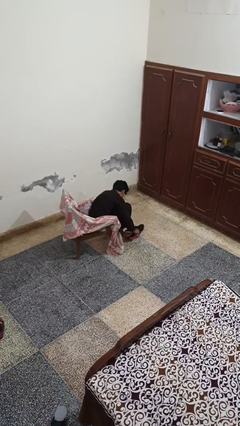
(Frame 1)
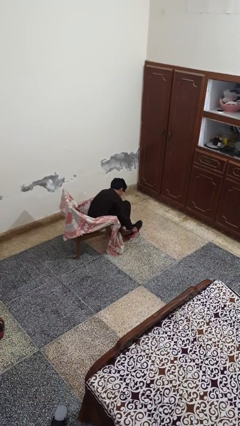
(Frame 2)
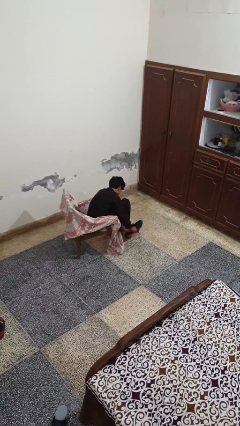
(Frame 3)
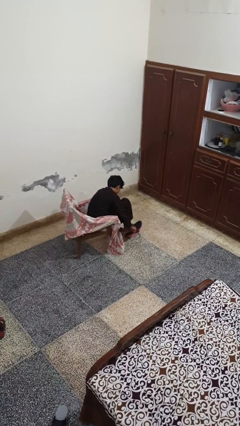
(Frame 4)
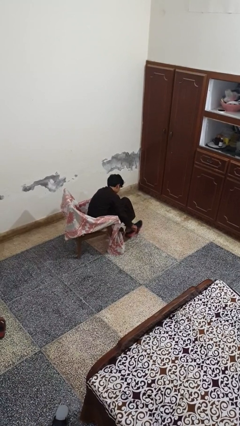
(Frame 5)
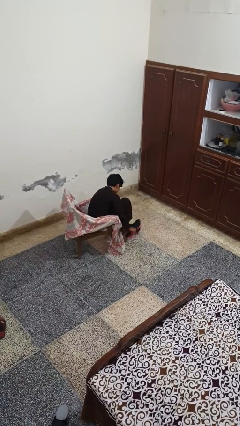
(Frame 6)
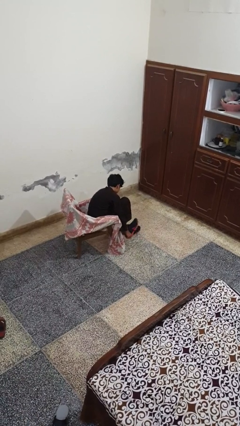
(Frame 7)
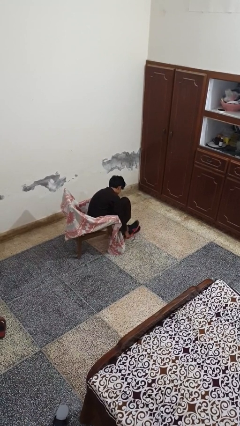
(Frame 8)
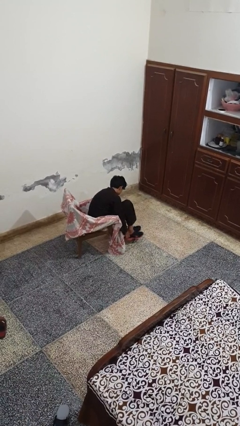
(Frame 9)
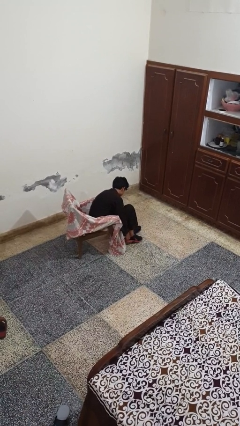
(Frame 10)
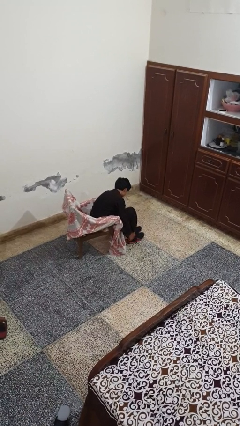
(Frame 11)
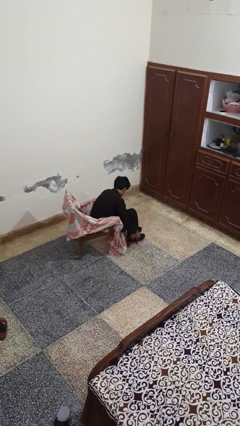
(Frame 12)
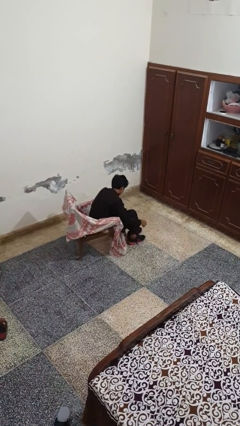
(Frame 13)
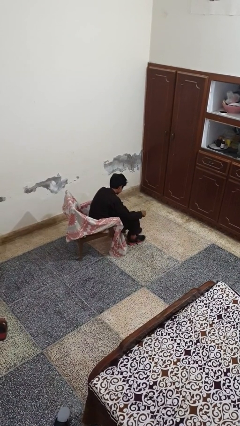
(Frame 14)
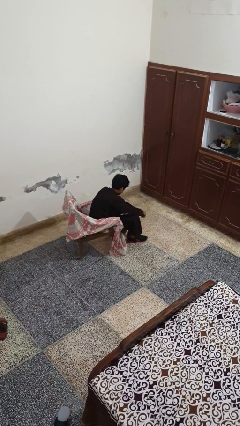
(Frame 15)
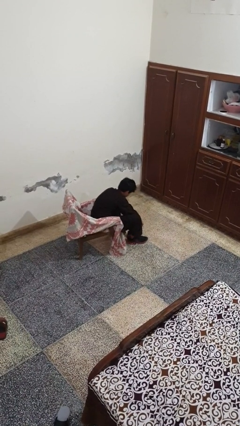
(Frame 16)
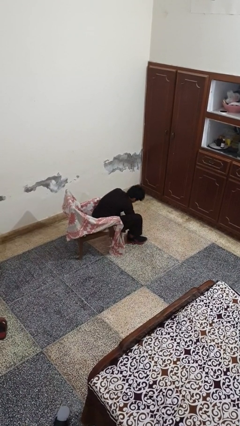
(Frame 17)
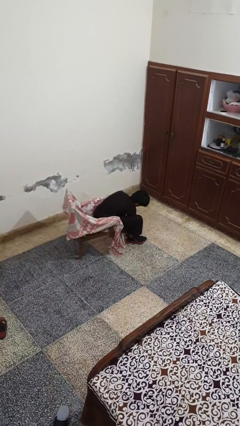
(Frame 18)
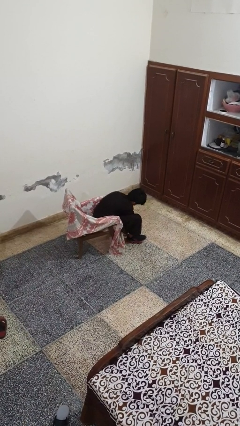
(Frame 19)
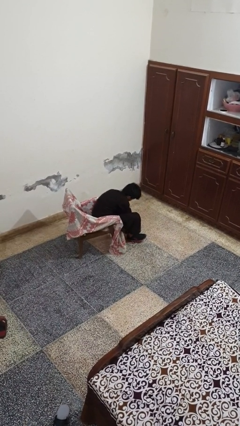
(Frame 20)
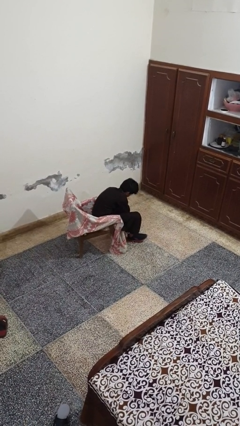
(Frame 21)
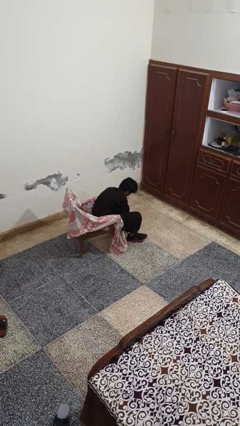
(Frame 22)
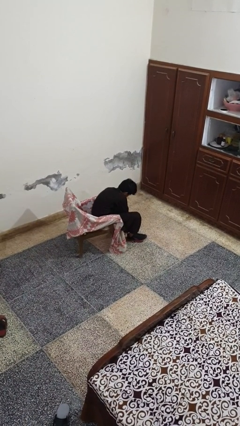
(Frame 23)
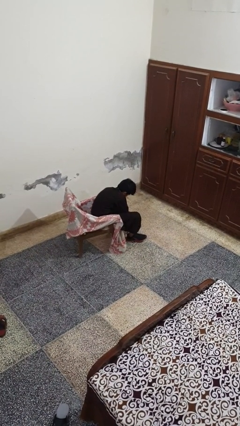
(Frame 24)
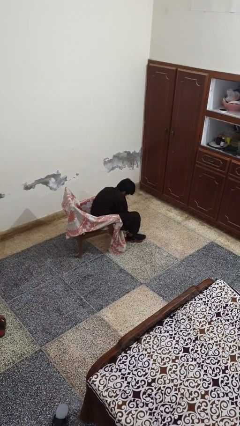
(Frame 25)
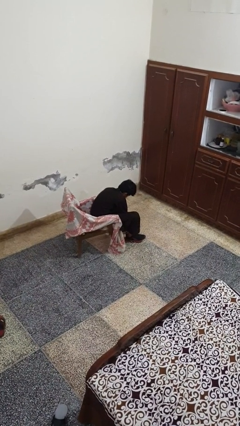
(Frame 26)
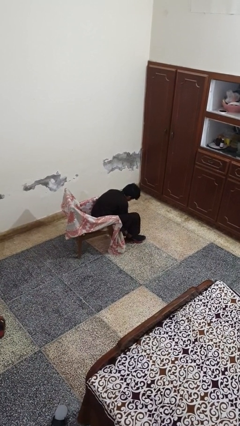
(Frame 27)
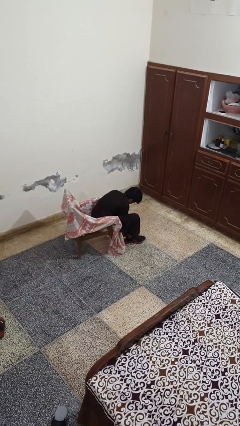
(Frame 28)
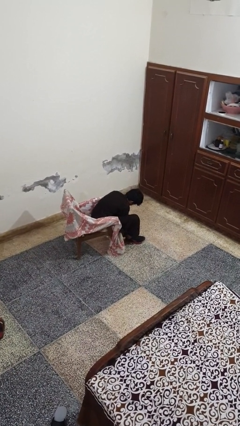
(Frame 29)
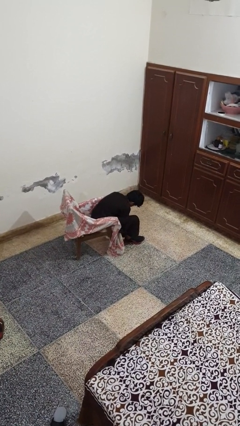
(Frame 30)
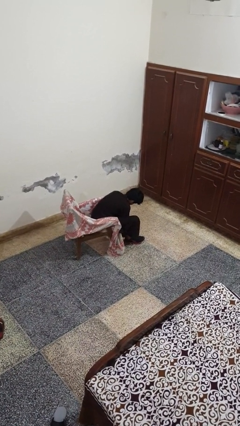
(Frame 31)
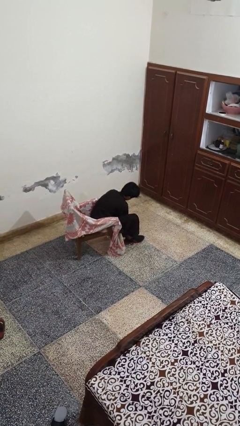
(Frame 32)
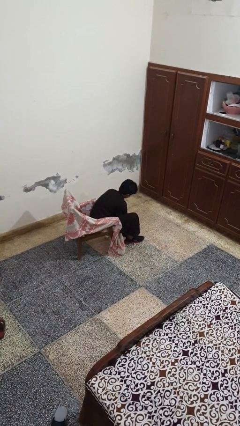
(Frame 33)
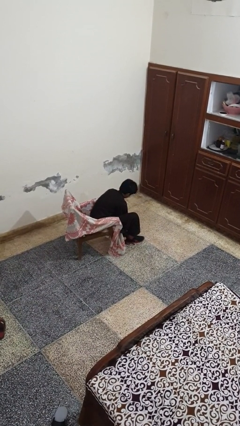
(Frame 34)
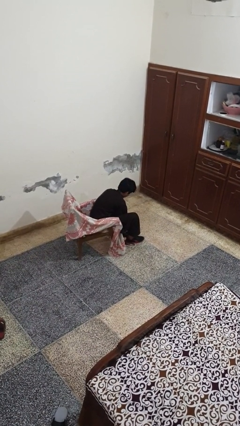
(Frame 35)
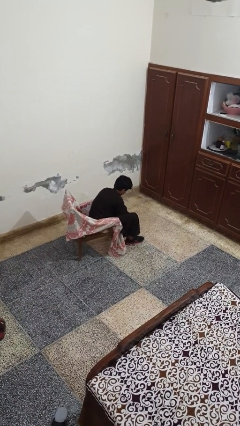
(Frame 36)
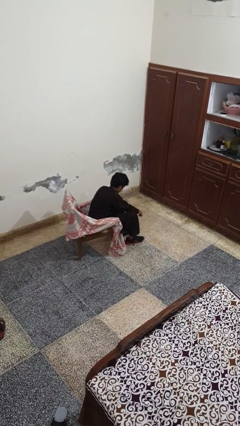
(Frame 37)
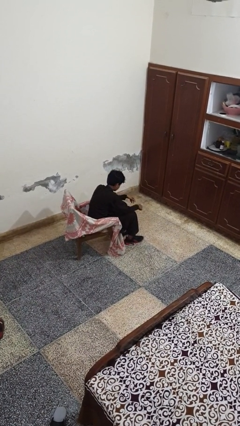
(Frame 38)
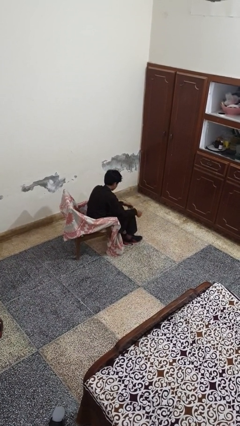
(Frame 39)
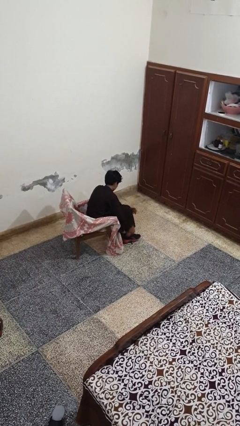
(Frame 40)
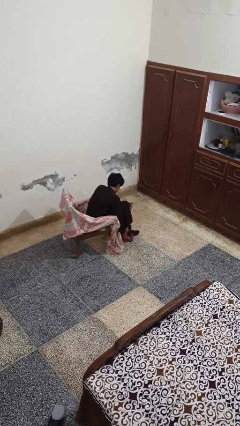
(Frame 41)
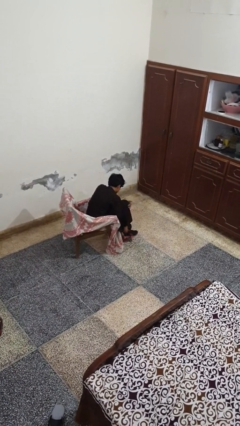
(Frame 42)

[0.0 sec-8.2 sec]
person puts on shoes

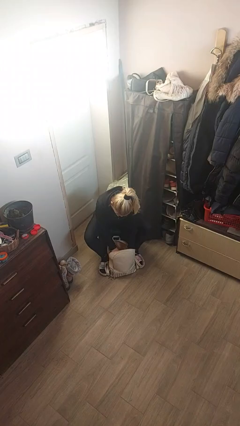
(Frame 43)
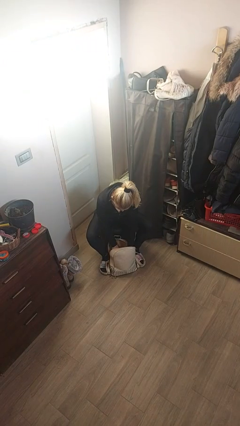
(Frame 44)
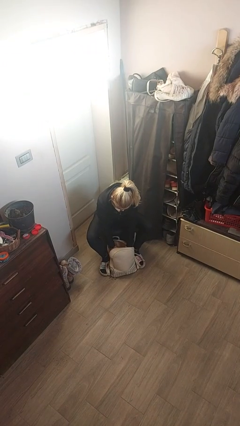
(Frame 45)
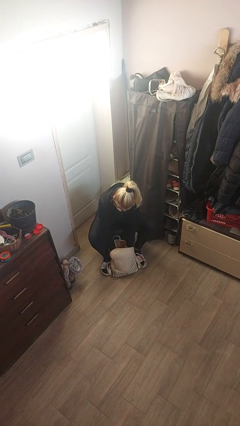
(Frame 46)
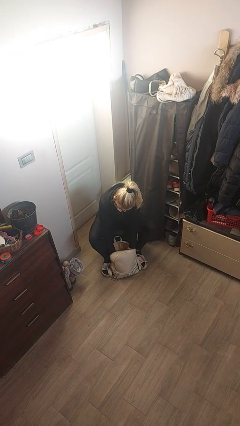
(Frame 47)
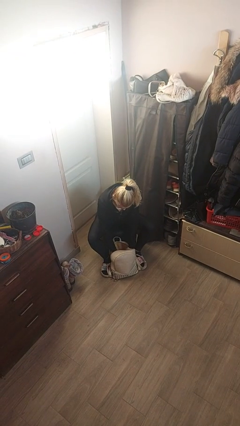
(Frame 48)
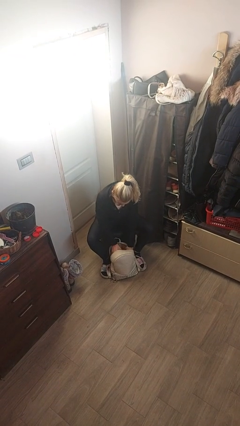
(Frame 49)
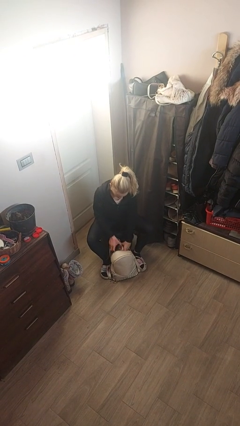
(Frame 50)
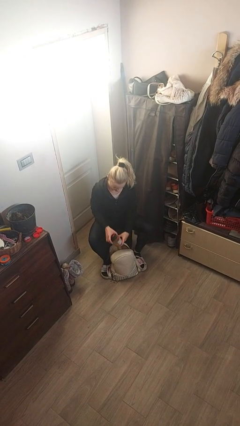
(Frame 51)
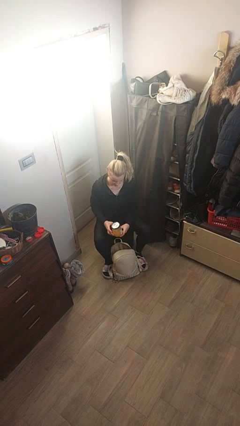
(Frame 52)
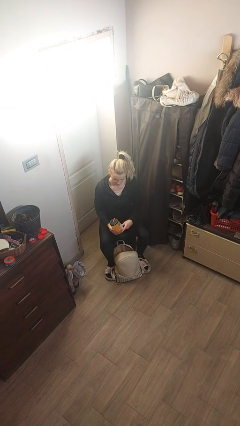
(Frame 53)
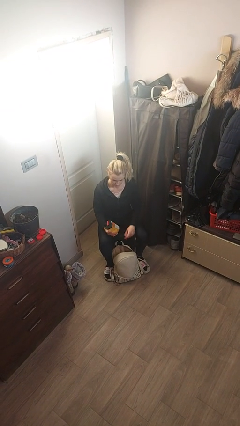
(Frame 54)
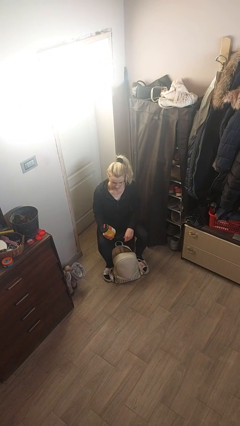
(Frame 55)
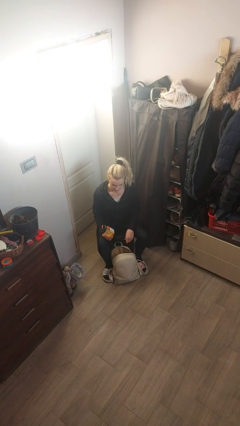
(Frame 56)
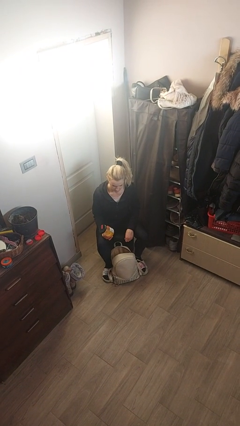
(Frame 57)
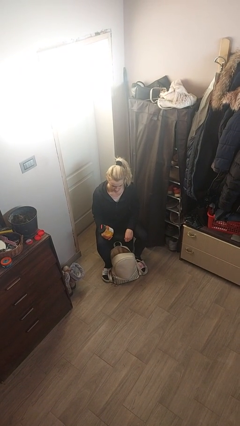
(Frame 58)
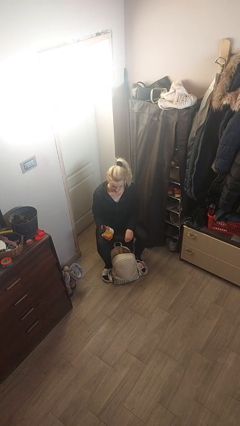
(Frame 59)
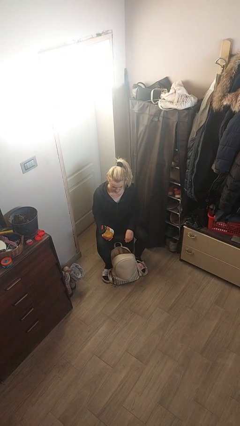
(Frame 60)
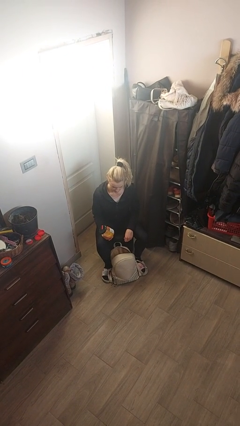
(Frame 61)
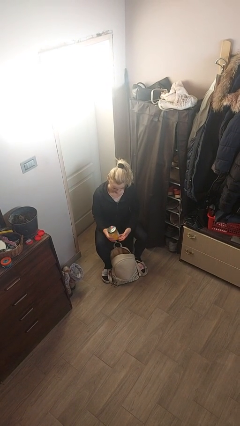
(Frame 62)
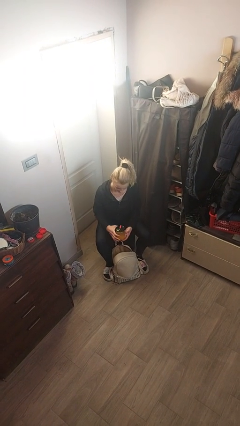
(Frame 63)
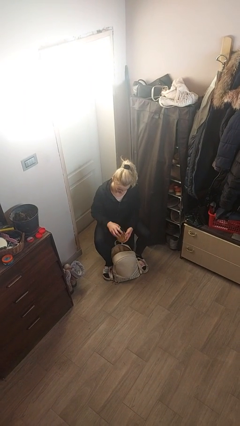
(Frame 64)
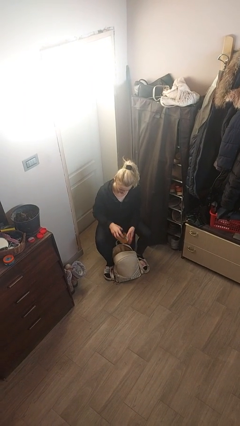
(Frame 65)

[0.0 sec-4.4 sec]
person takes object from backpack

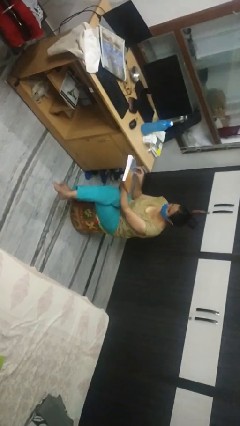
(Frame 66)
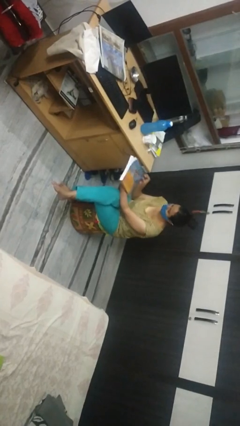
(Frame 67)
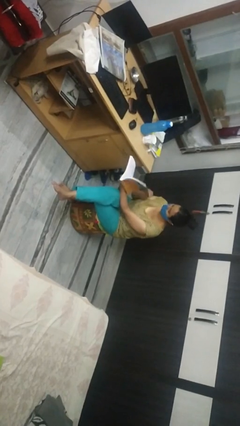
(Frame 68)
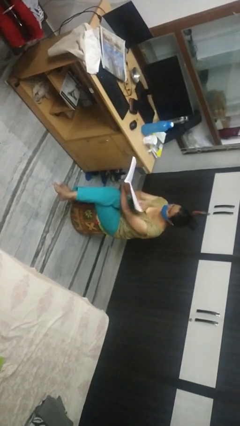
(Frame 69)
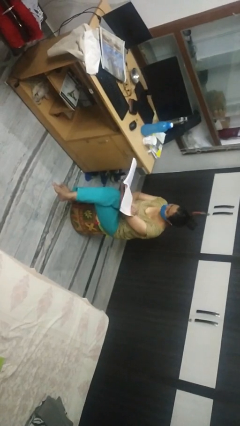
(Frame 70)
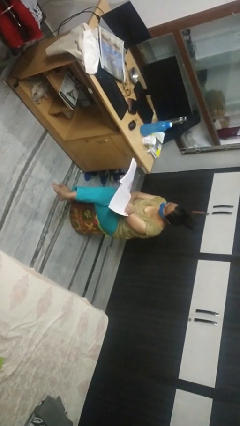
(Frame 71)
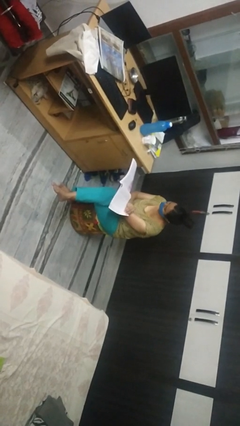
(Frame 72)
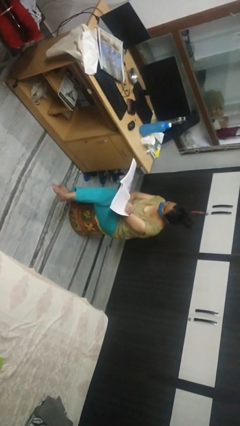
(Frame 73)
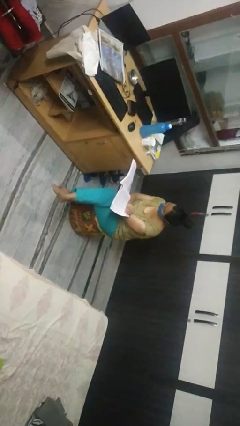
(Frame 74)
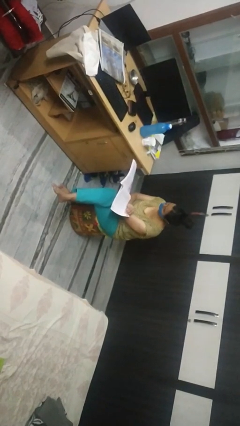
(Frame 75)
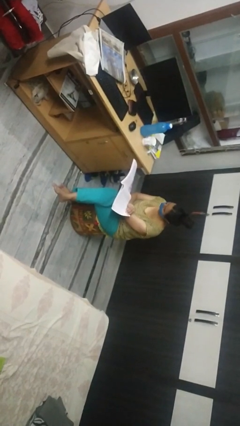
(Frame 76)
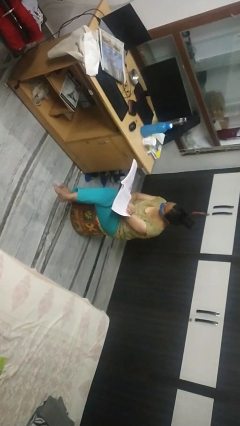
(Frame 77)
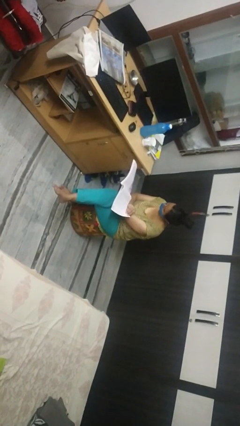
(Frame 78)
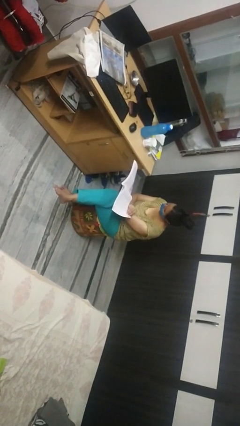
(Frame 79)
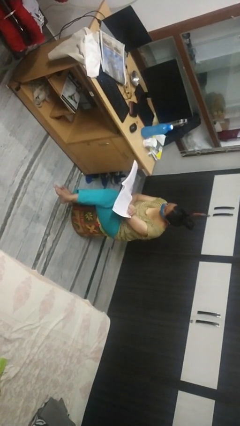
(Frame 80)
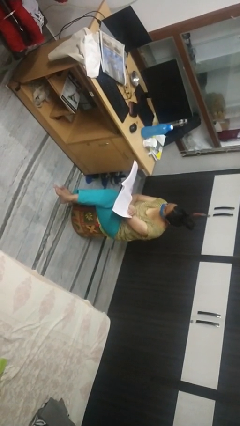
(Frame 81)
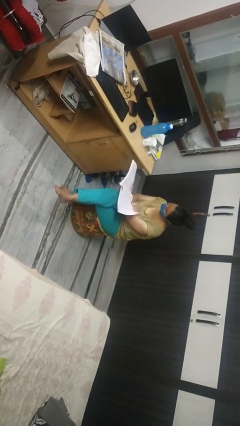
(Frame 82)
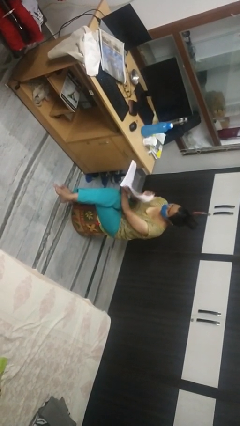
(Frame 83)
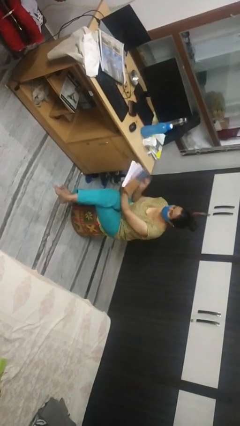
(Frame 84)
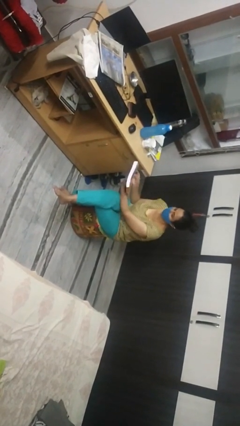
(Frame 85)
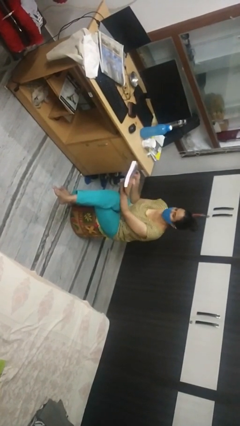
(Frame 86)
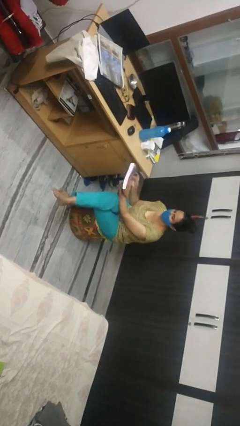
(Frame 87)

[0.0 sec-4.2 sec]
person reads book

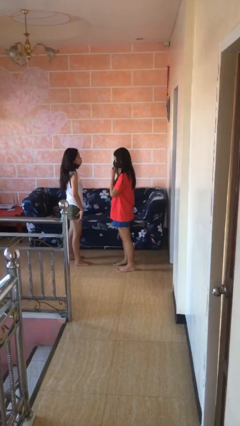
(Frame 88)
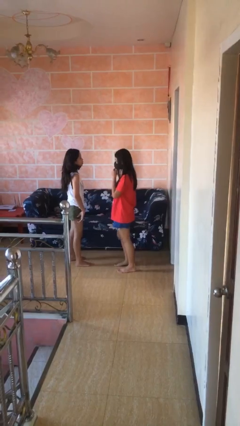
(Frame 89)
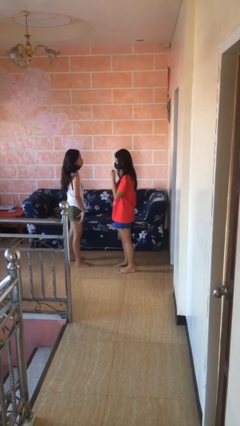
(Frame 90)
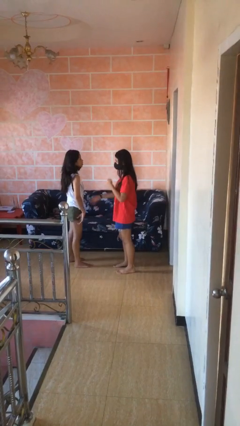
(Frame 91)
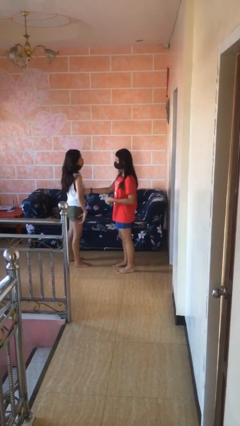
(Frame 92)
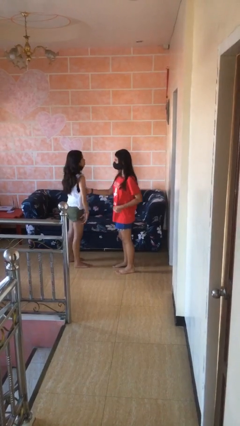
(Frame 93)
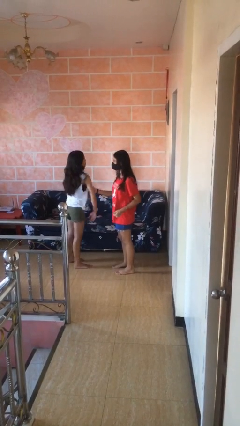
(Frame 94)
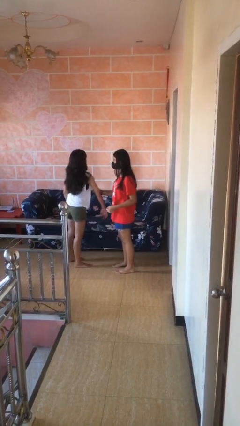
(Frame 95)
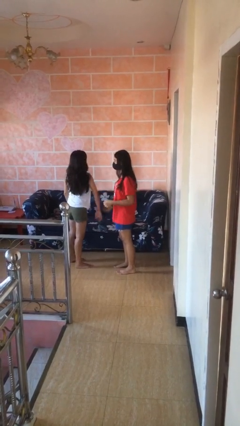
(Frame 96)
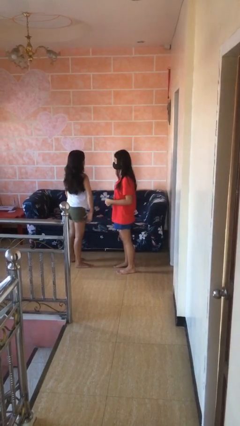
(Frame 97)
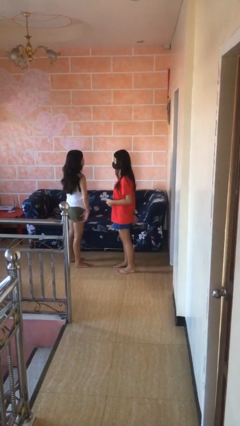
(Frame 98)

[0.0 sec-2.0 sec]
person grabs person by bicep
